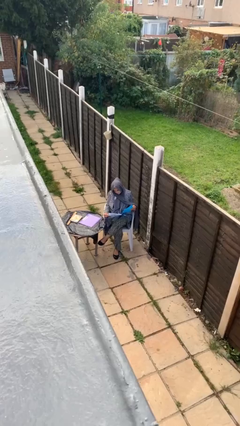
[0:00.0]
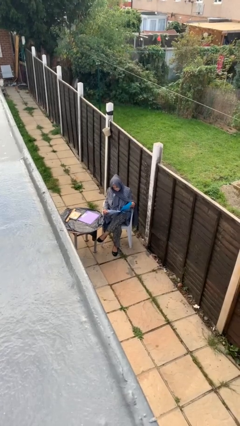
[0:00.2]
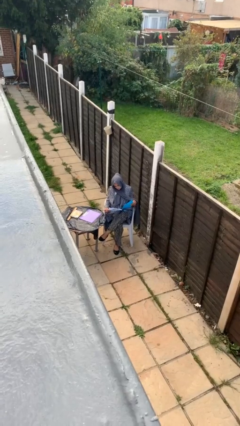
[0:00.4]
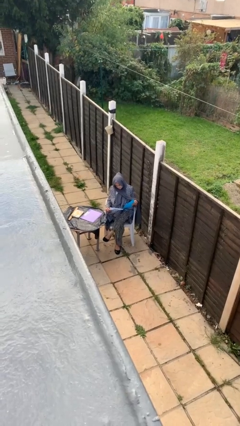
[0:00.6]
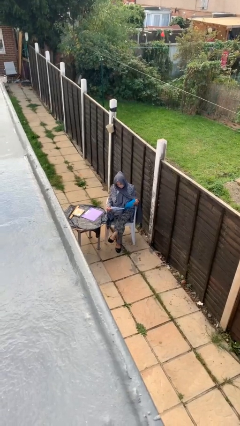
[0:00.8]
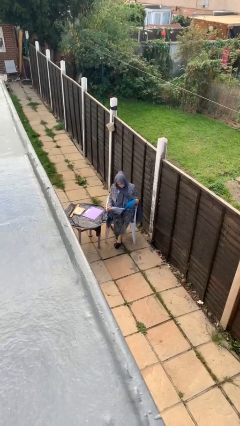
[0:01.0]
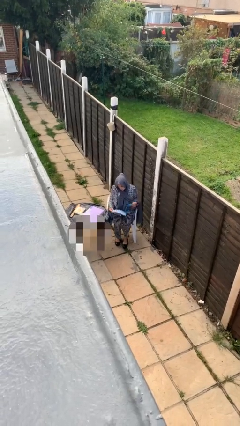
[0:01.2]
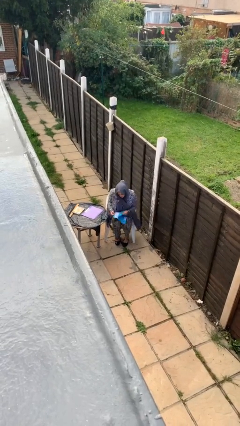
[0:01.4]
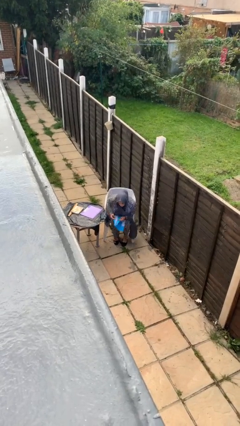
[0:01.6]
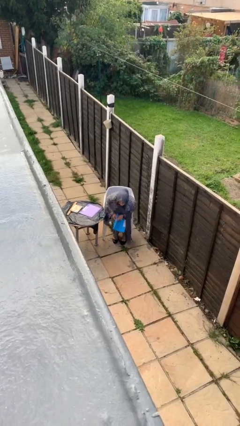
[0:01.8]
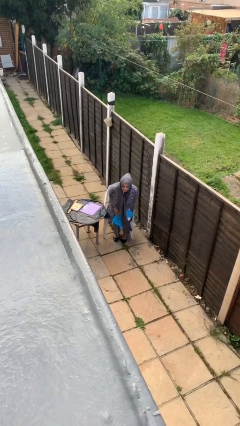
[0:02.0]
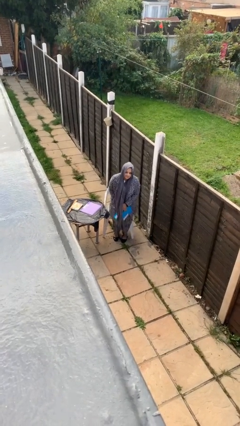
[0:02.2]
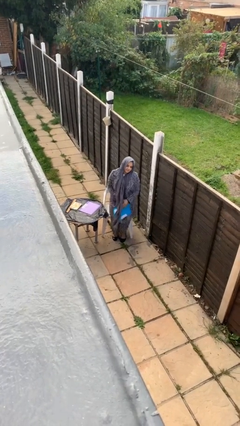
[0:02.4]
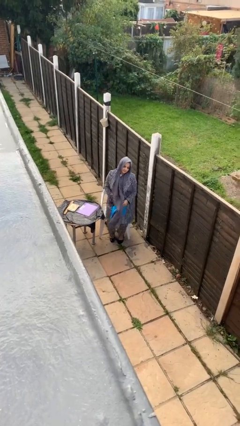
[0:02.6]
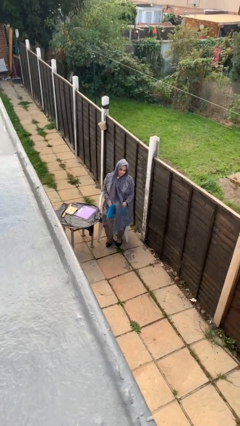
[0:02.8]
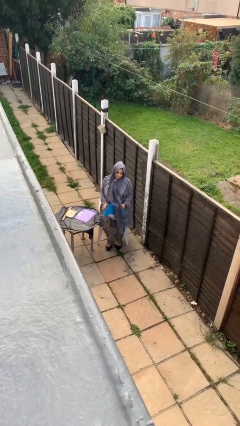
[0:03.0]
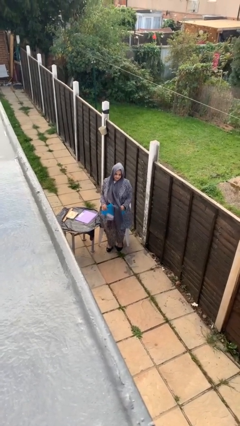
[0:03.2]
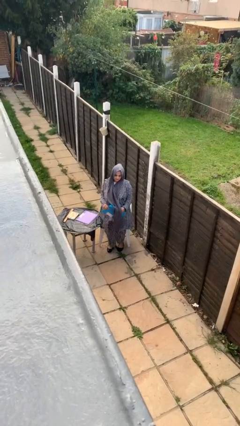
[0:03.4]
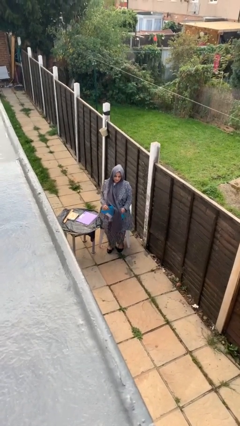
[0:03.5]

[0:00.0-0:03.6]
person stands up

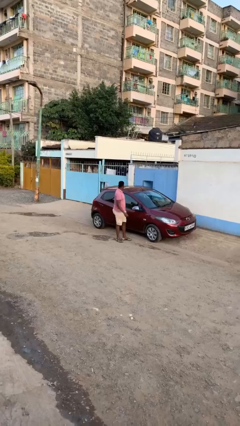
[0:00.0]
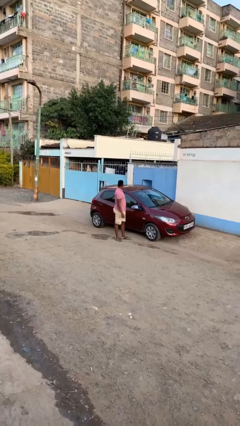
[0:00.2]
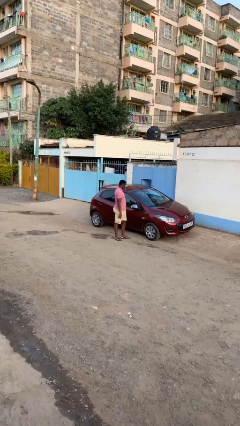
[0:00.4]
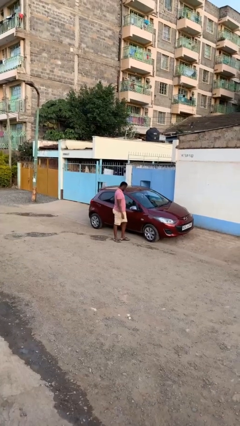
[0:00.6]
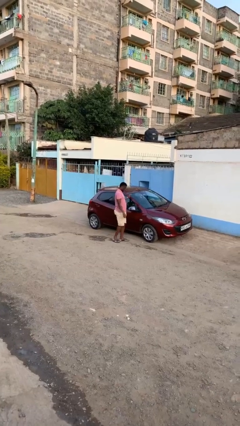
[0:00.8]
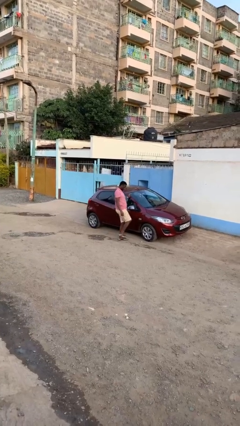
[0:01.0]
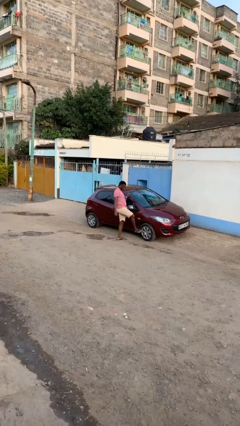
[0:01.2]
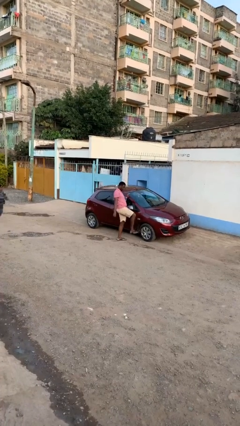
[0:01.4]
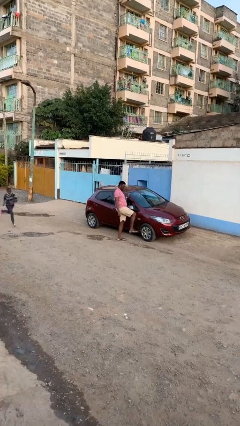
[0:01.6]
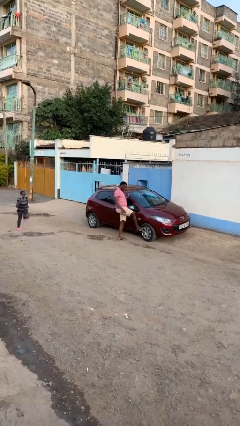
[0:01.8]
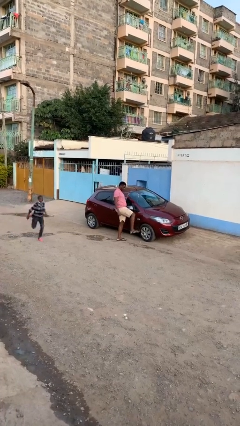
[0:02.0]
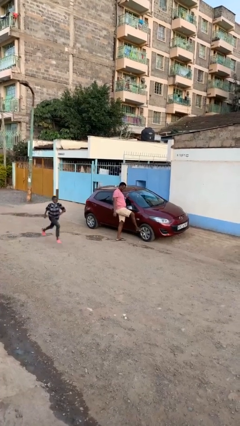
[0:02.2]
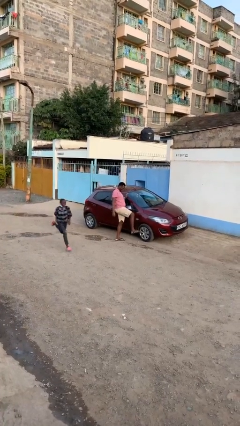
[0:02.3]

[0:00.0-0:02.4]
person kicks car tires

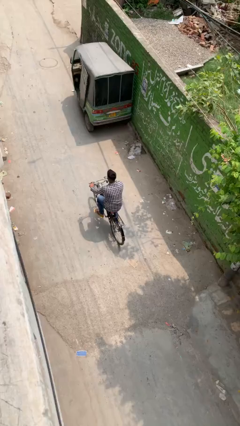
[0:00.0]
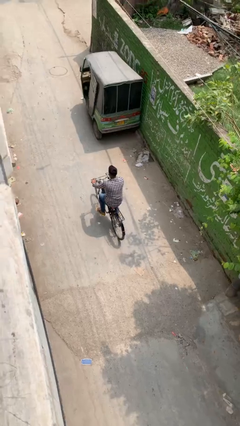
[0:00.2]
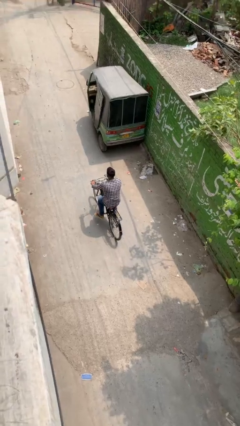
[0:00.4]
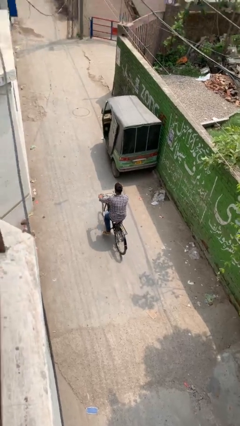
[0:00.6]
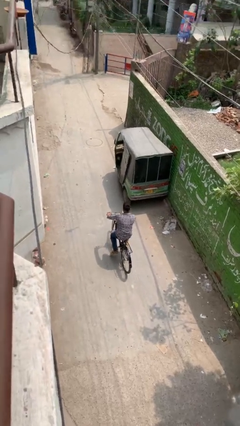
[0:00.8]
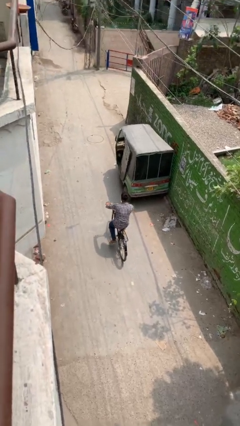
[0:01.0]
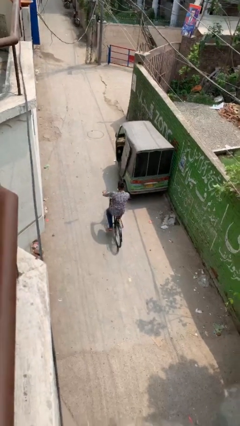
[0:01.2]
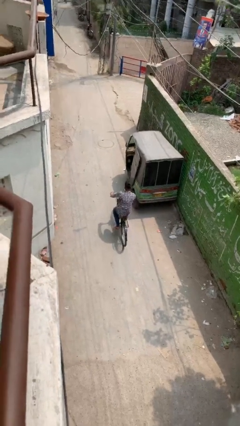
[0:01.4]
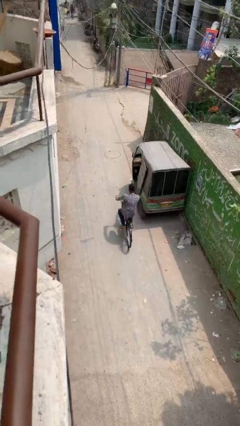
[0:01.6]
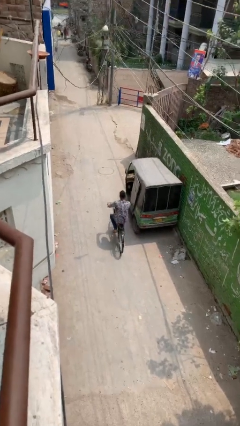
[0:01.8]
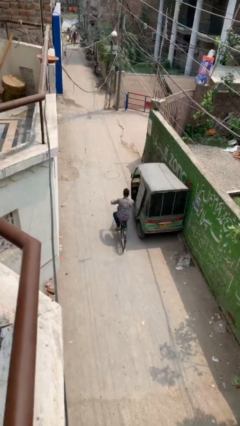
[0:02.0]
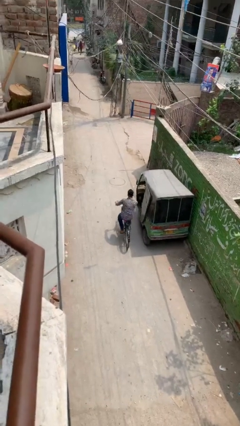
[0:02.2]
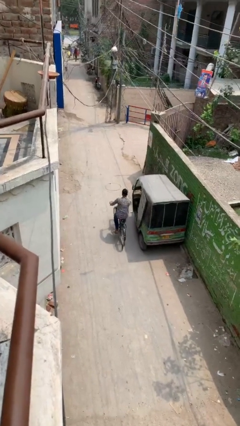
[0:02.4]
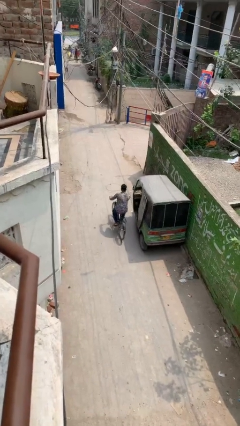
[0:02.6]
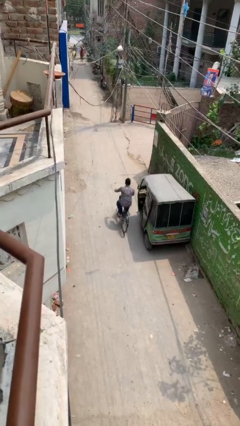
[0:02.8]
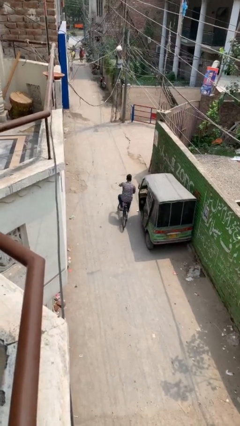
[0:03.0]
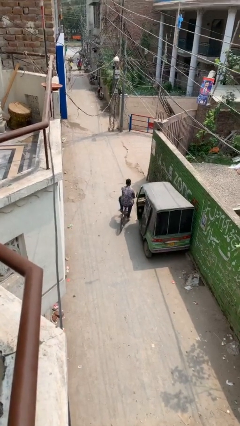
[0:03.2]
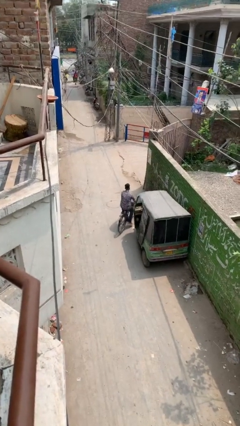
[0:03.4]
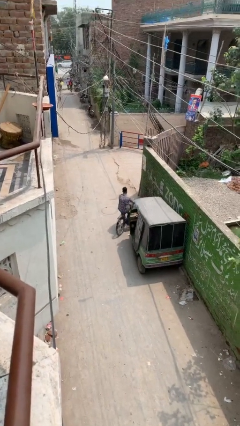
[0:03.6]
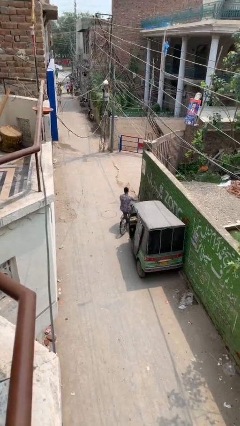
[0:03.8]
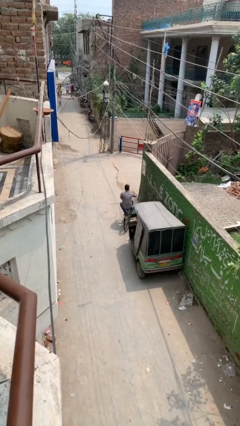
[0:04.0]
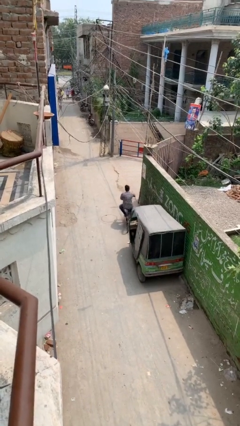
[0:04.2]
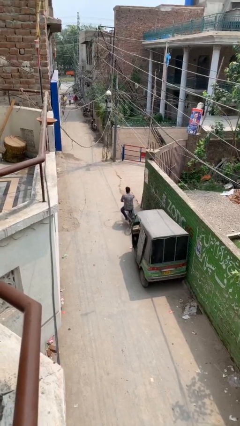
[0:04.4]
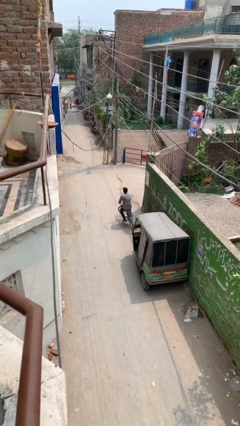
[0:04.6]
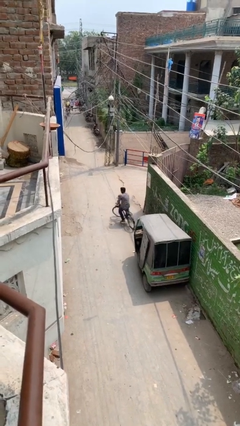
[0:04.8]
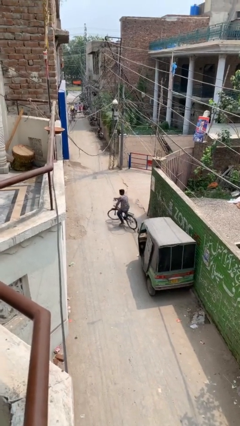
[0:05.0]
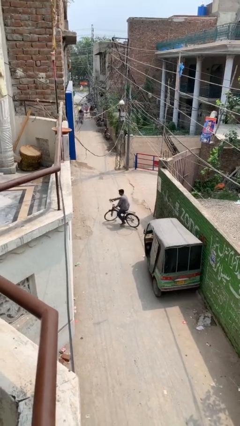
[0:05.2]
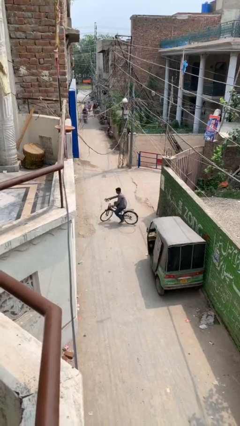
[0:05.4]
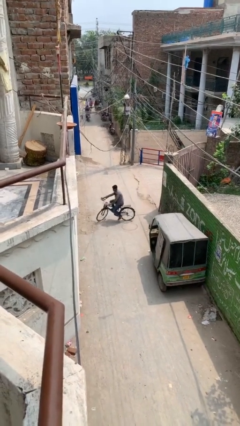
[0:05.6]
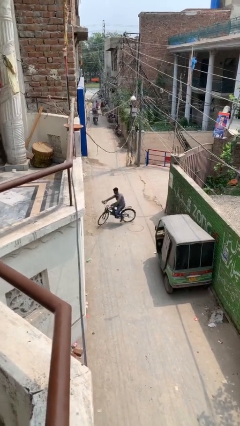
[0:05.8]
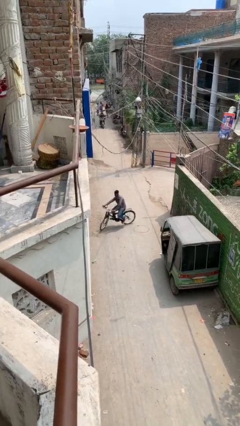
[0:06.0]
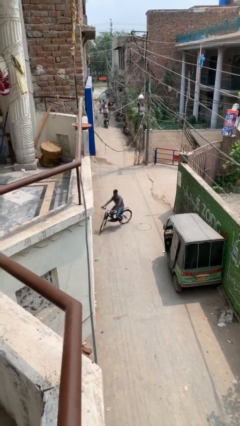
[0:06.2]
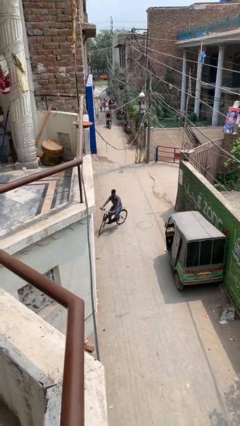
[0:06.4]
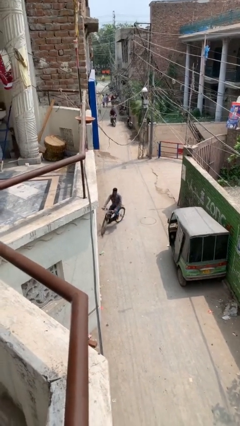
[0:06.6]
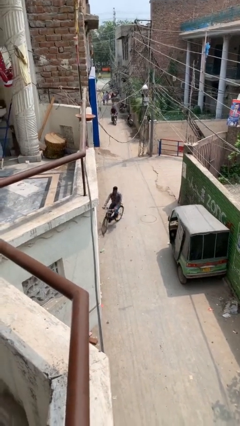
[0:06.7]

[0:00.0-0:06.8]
person rides bicycle

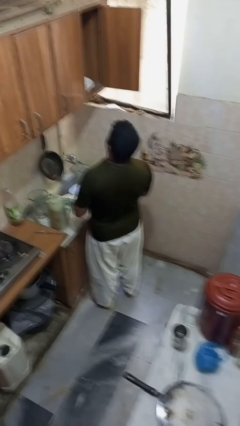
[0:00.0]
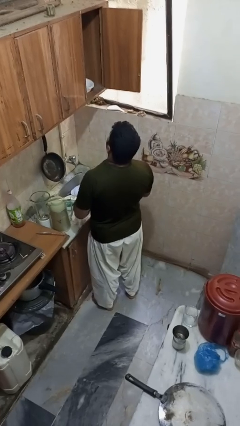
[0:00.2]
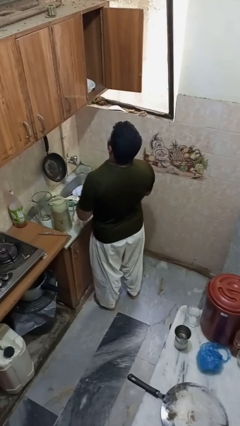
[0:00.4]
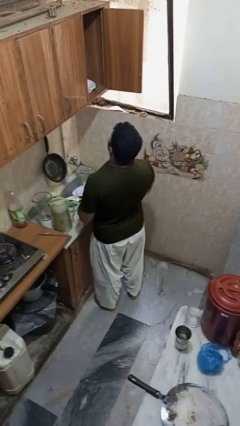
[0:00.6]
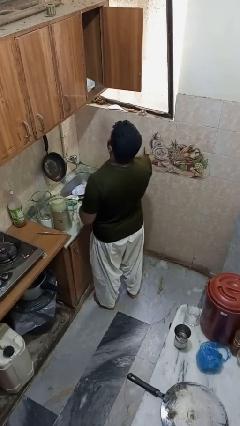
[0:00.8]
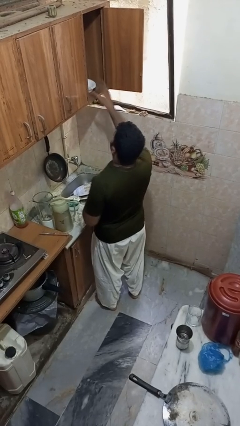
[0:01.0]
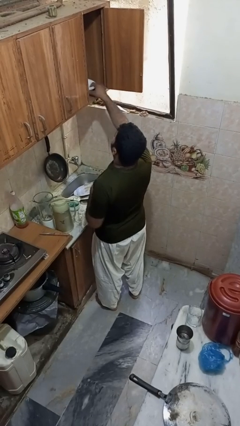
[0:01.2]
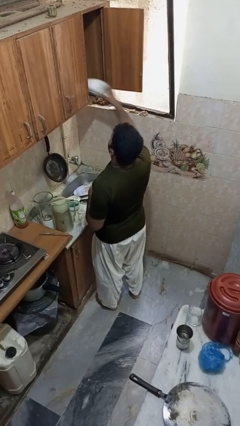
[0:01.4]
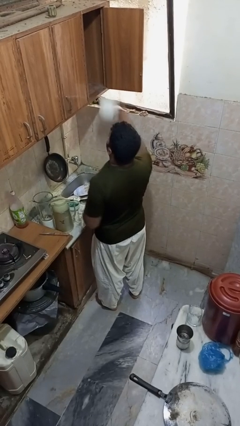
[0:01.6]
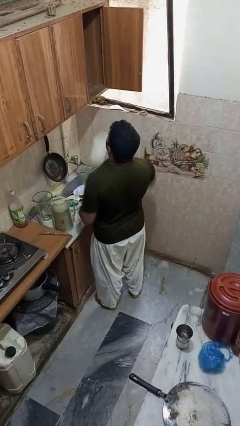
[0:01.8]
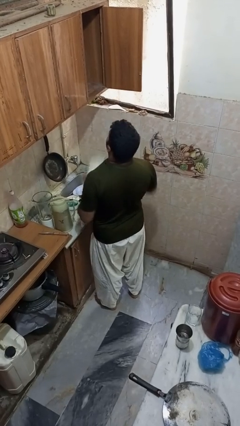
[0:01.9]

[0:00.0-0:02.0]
person takes object from cabinet

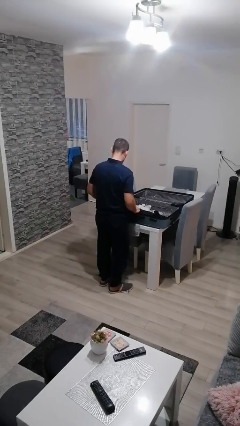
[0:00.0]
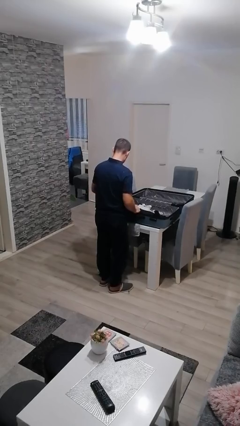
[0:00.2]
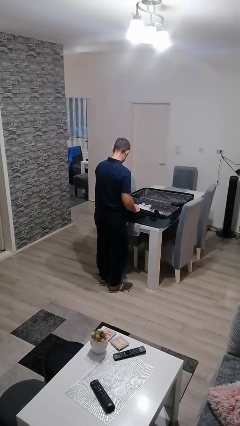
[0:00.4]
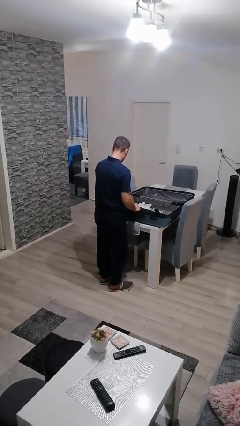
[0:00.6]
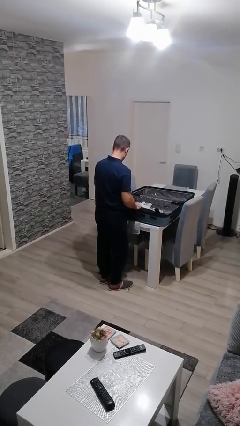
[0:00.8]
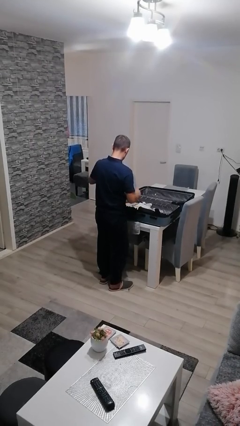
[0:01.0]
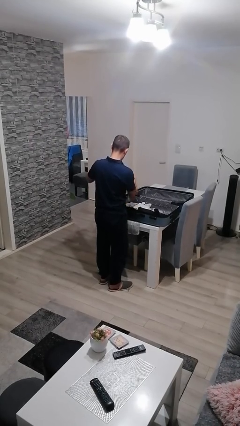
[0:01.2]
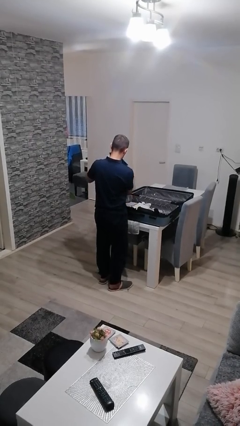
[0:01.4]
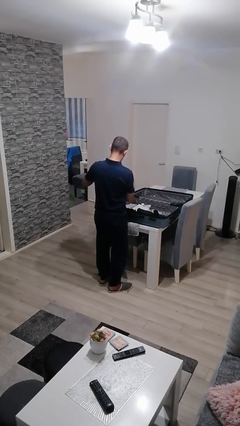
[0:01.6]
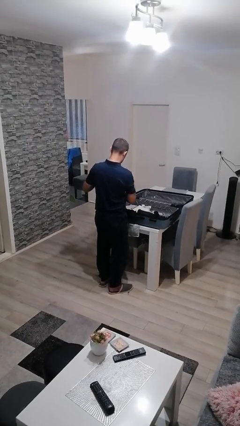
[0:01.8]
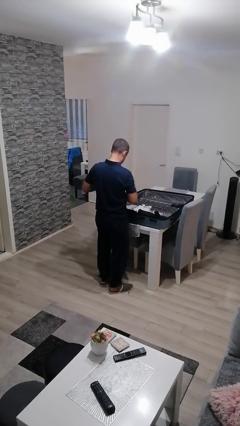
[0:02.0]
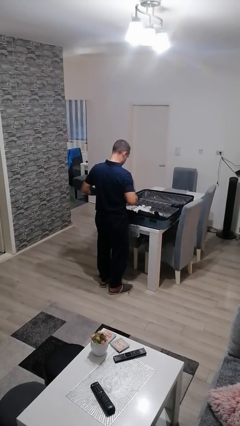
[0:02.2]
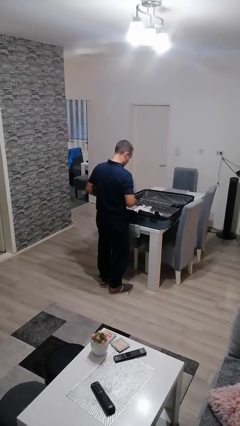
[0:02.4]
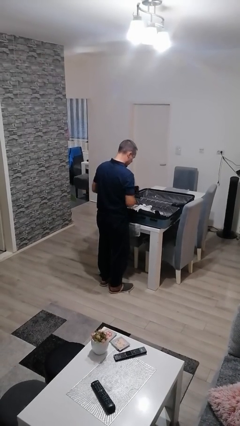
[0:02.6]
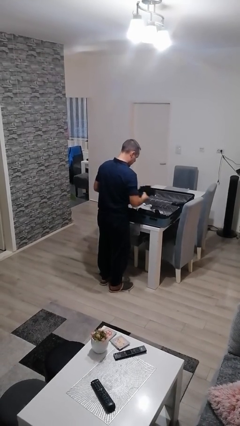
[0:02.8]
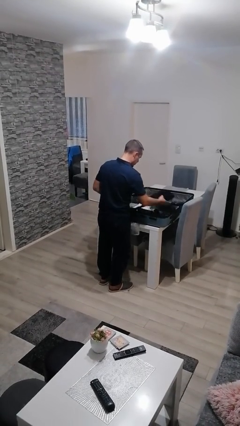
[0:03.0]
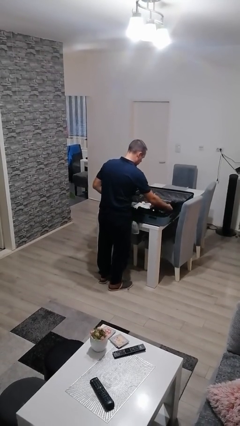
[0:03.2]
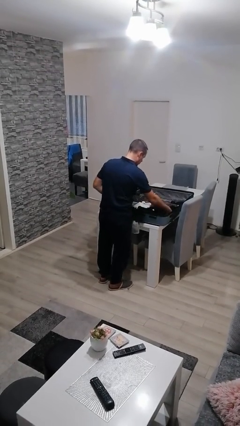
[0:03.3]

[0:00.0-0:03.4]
person loads clothes into suitcase
